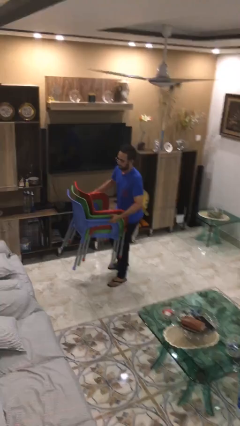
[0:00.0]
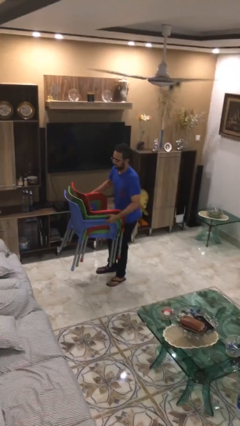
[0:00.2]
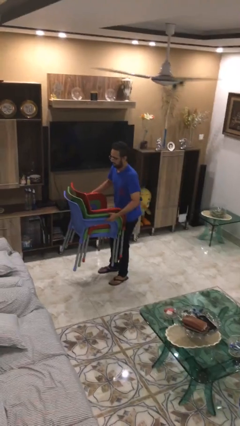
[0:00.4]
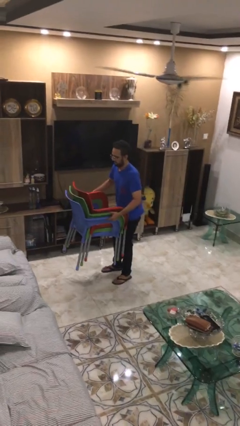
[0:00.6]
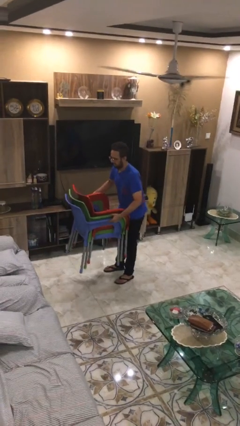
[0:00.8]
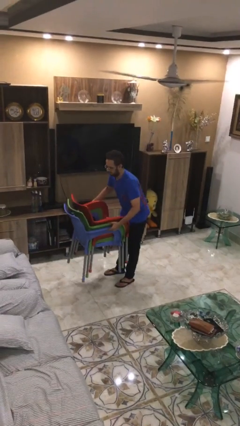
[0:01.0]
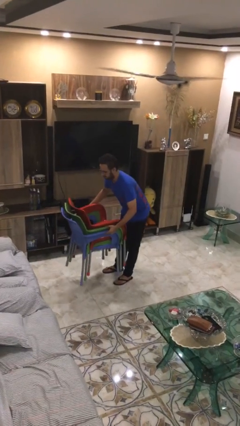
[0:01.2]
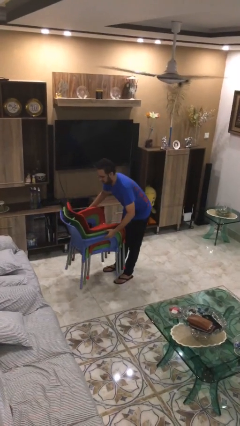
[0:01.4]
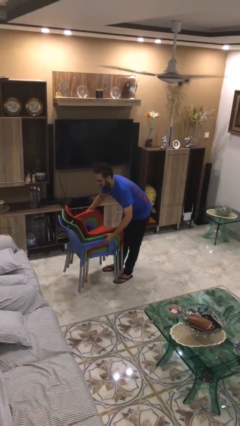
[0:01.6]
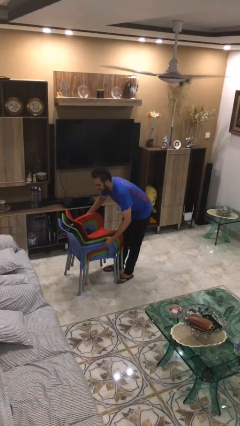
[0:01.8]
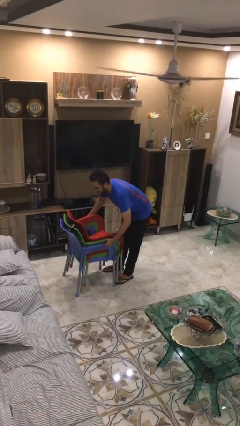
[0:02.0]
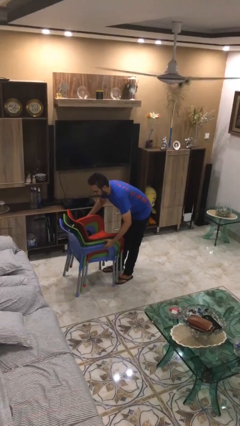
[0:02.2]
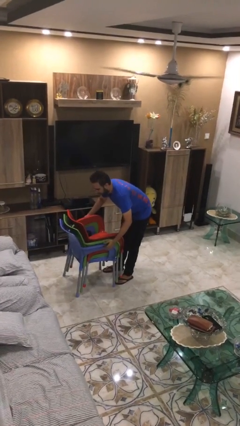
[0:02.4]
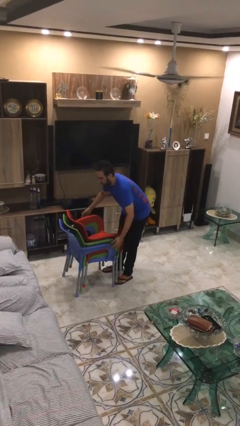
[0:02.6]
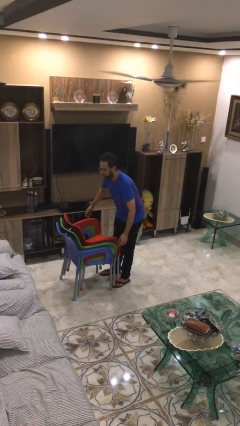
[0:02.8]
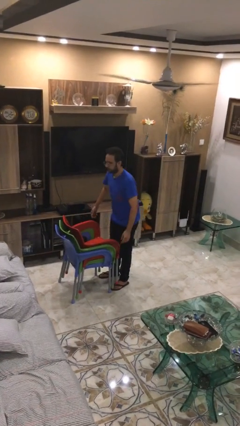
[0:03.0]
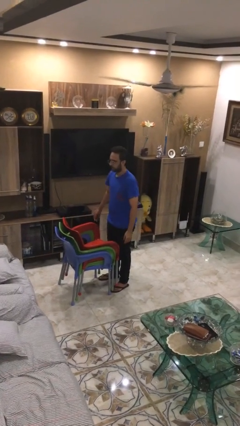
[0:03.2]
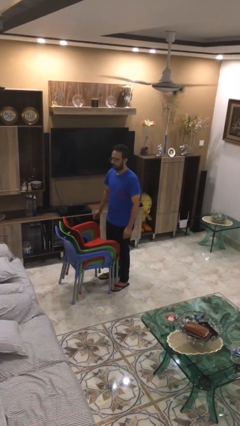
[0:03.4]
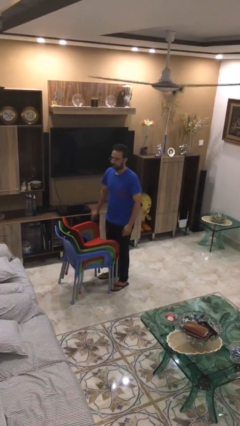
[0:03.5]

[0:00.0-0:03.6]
person puts down object on floor

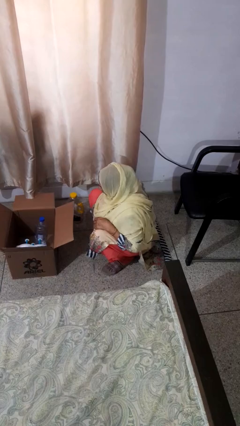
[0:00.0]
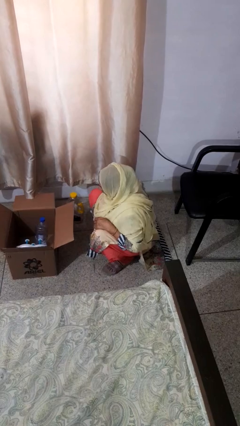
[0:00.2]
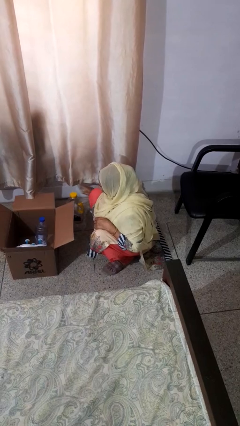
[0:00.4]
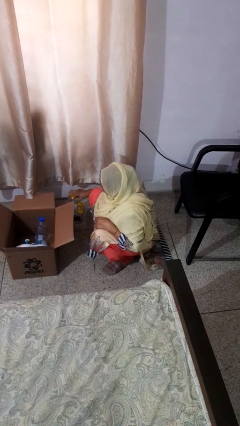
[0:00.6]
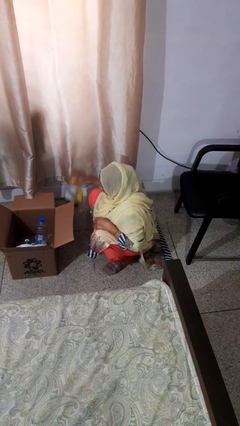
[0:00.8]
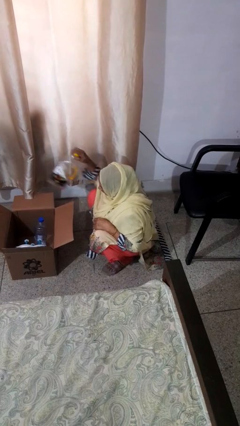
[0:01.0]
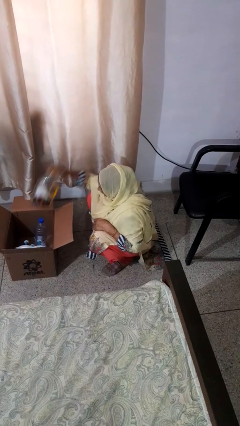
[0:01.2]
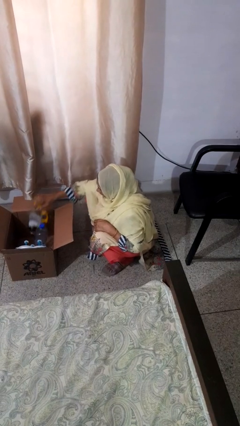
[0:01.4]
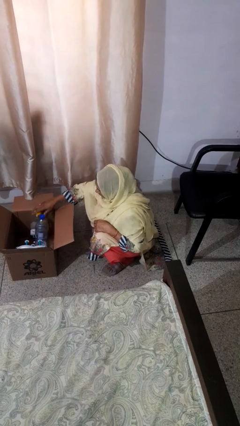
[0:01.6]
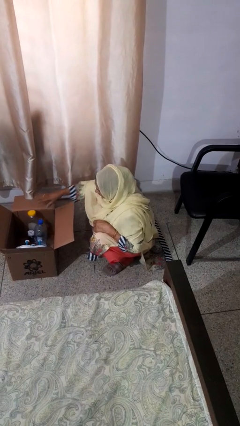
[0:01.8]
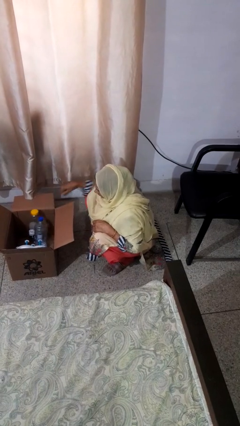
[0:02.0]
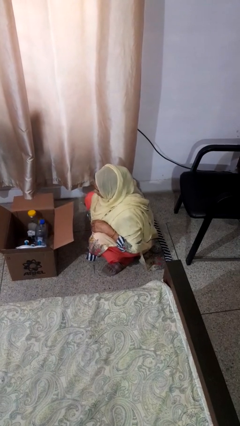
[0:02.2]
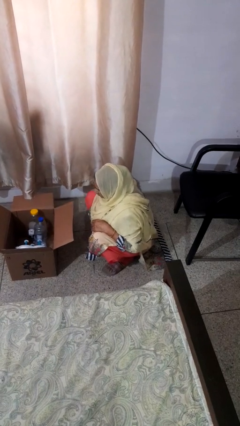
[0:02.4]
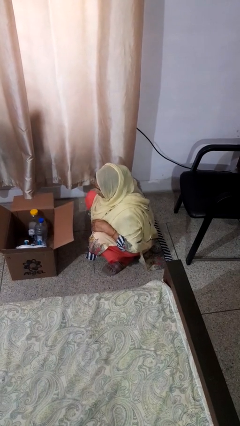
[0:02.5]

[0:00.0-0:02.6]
person puts object into box

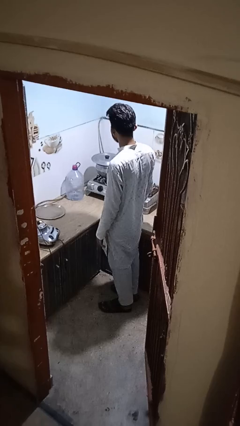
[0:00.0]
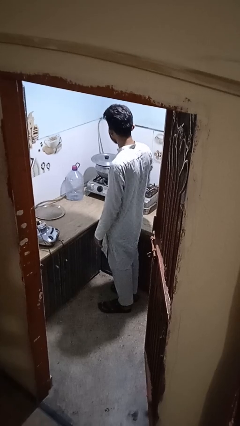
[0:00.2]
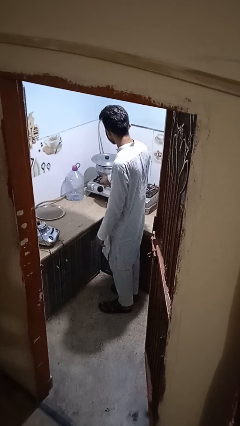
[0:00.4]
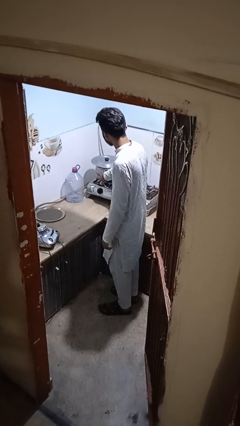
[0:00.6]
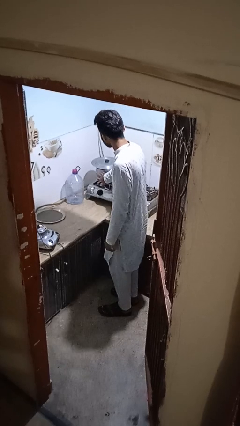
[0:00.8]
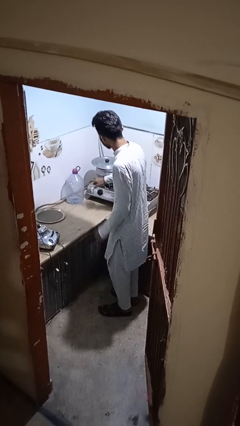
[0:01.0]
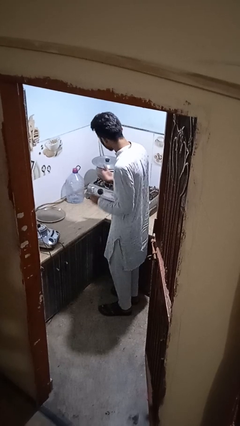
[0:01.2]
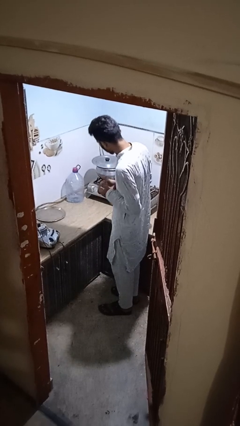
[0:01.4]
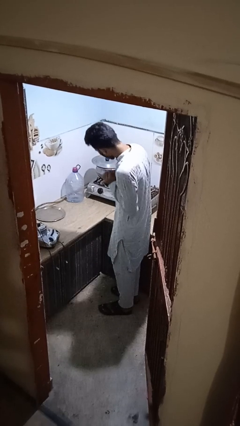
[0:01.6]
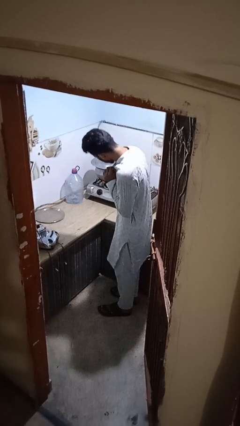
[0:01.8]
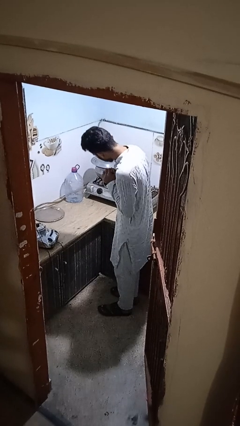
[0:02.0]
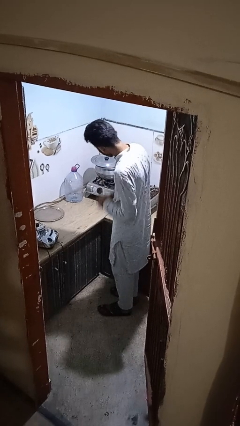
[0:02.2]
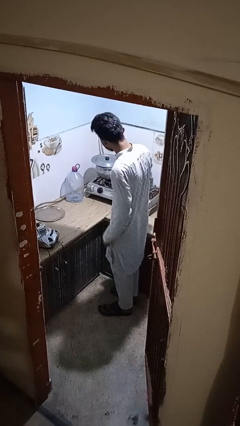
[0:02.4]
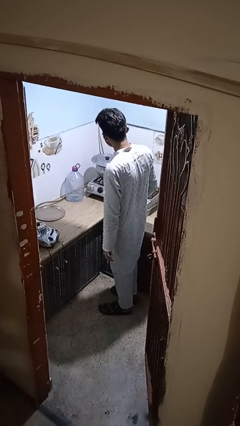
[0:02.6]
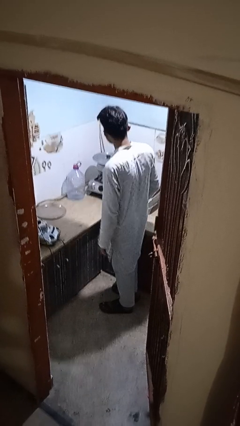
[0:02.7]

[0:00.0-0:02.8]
person burns hand

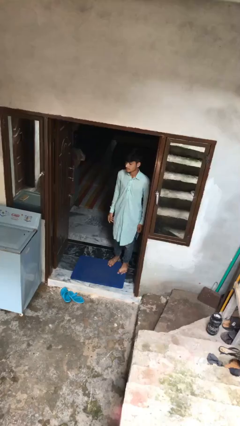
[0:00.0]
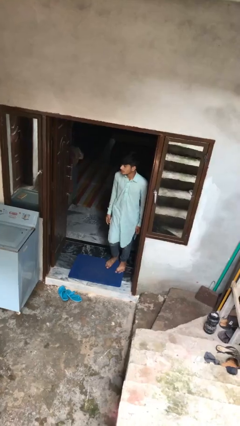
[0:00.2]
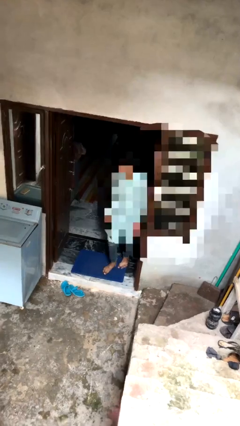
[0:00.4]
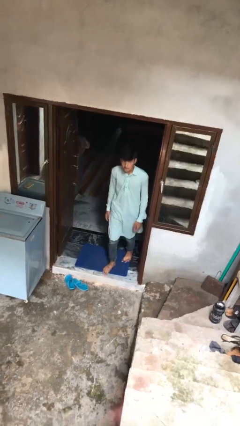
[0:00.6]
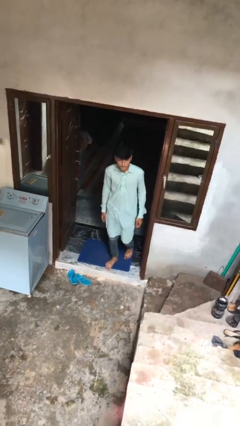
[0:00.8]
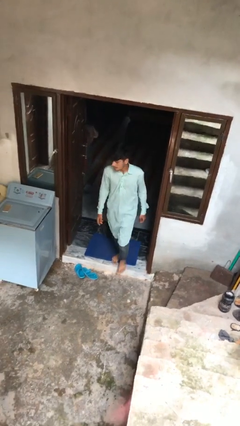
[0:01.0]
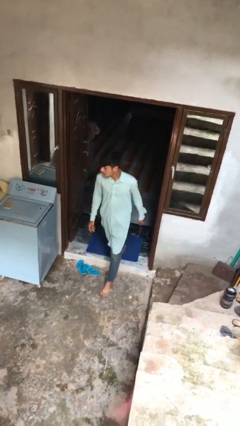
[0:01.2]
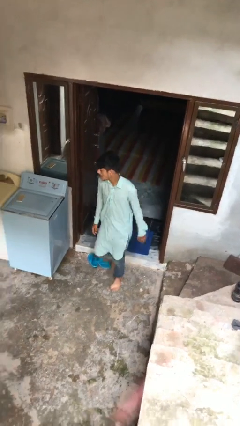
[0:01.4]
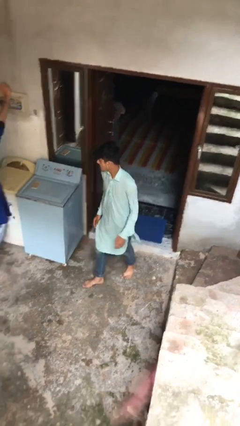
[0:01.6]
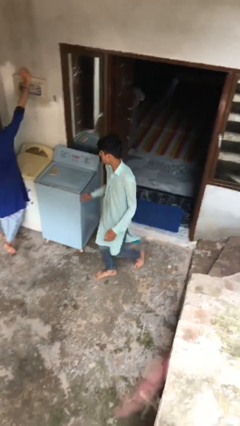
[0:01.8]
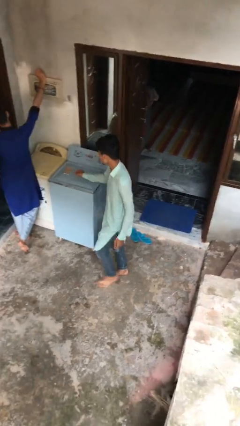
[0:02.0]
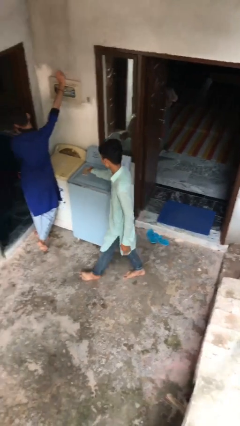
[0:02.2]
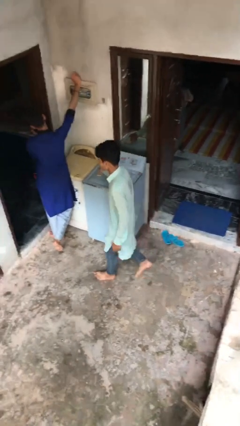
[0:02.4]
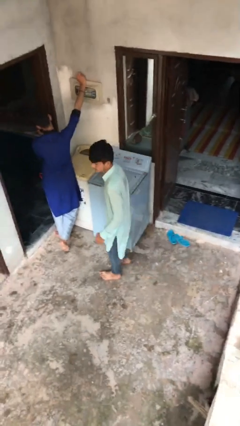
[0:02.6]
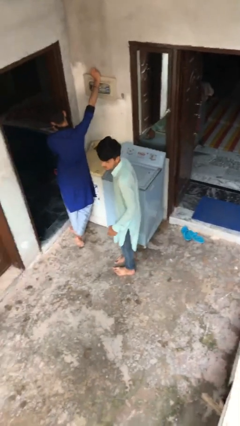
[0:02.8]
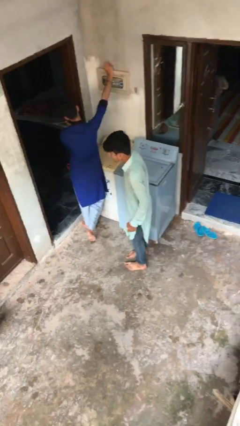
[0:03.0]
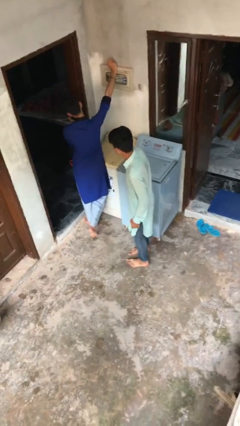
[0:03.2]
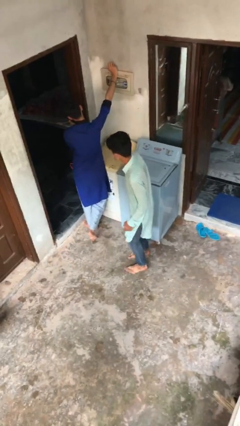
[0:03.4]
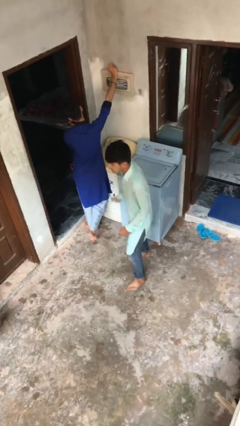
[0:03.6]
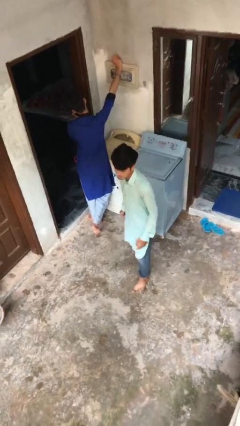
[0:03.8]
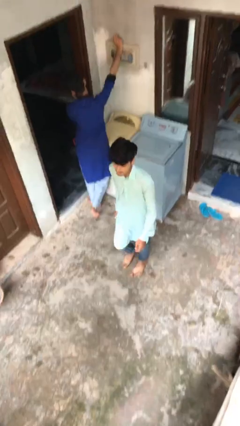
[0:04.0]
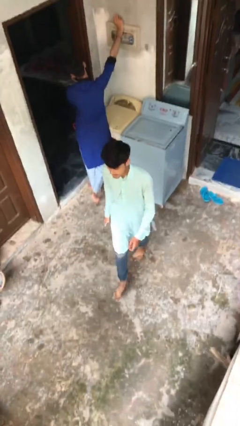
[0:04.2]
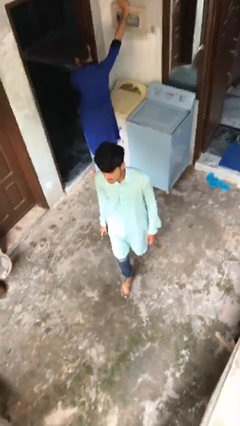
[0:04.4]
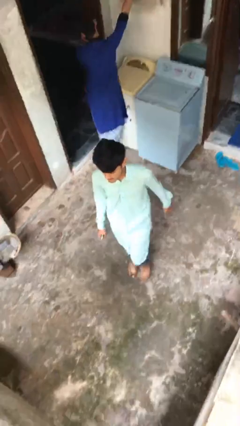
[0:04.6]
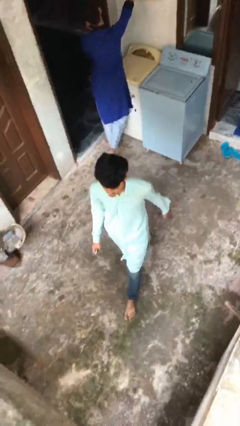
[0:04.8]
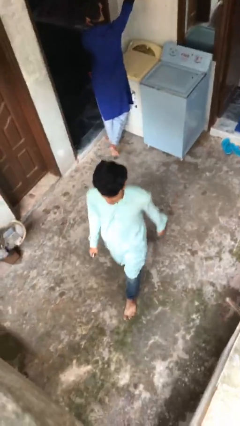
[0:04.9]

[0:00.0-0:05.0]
person steals object from person

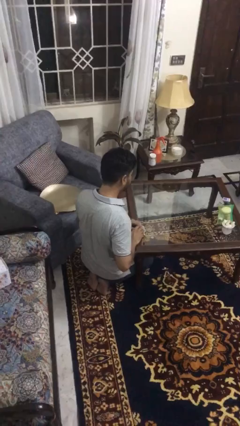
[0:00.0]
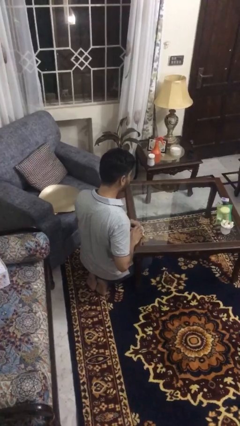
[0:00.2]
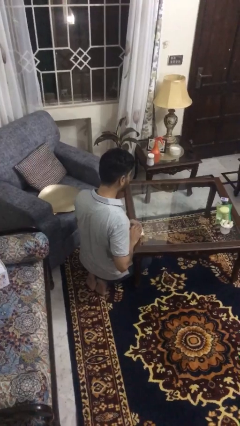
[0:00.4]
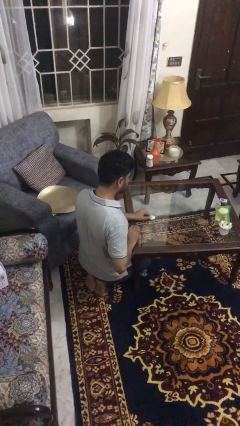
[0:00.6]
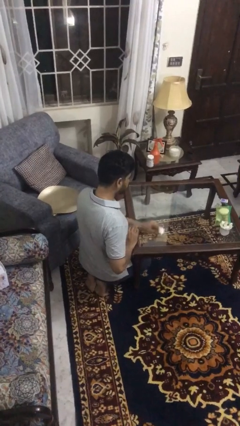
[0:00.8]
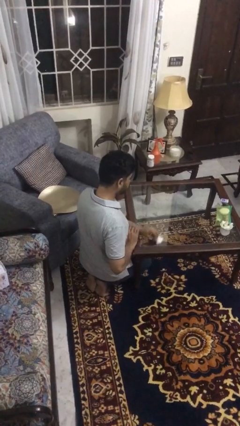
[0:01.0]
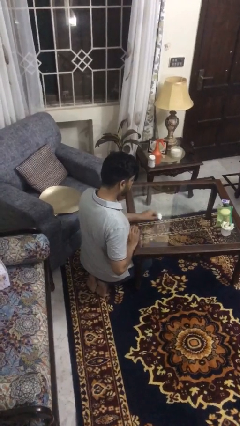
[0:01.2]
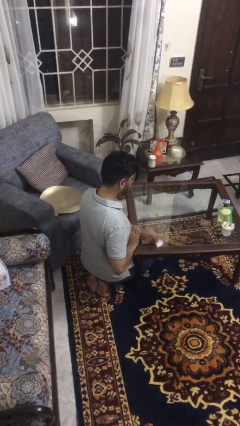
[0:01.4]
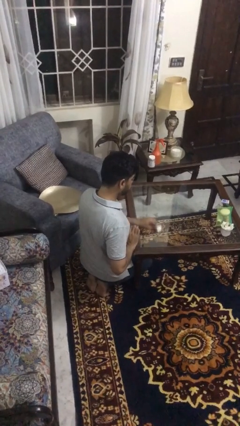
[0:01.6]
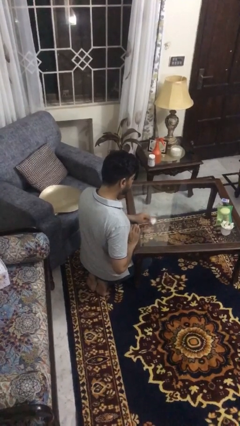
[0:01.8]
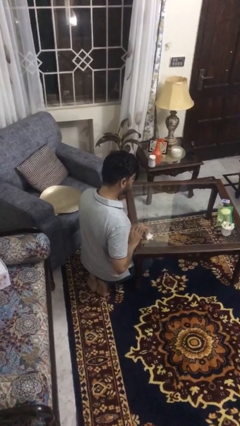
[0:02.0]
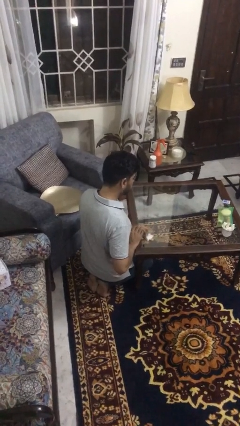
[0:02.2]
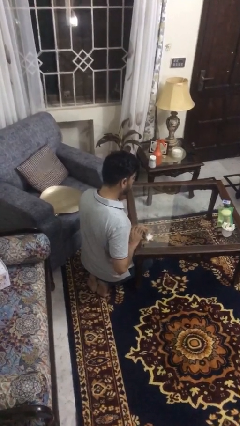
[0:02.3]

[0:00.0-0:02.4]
person cleans table with rag

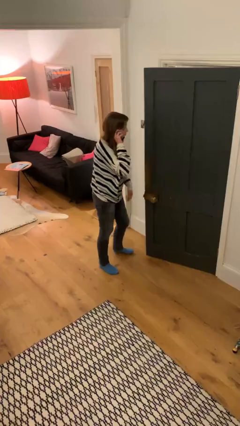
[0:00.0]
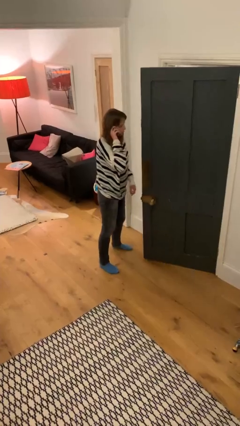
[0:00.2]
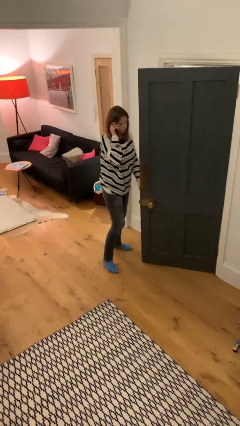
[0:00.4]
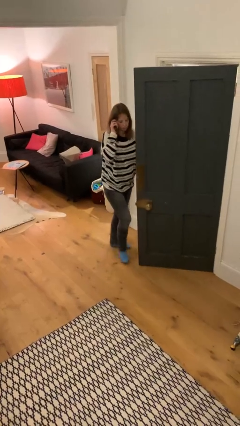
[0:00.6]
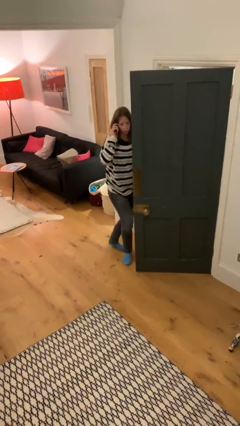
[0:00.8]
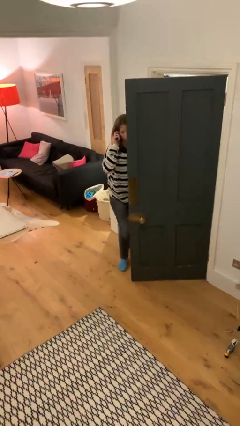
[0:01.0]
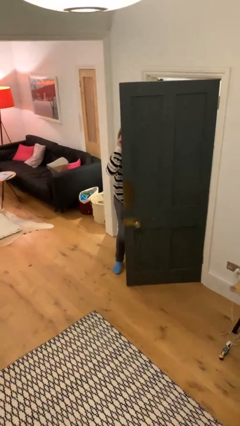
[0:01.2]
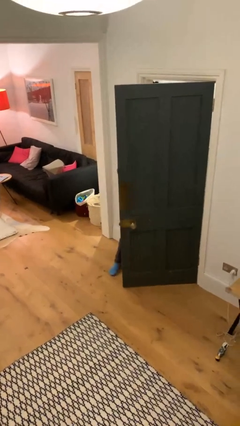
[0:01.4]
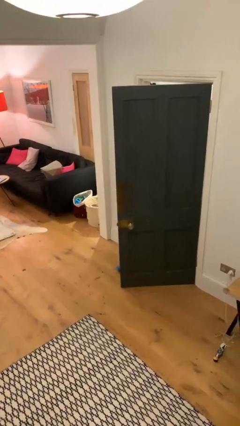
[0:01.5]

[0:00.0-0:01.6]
person exits scene through structure
